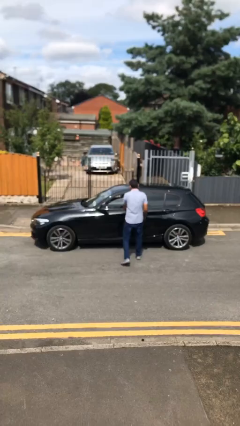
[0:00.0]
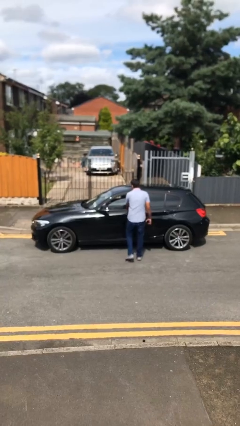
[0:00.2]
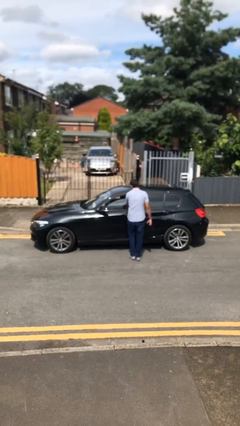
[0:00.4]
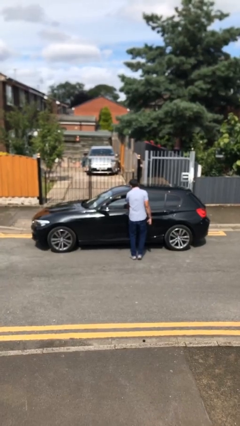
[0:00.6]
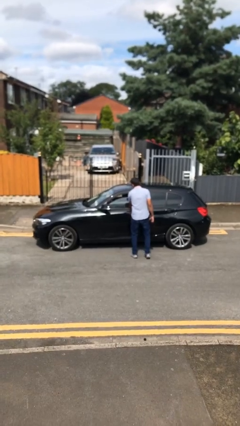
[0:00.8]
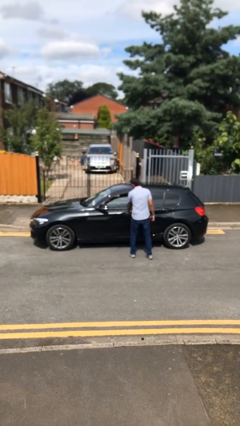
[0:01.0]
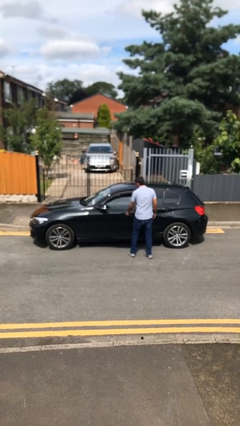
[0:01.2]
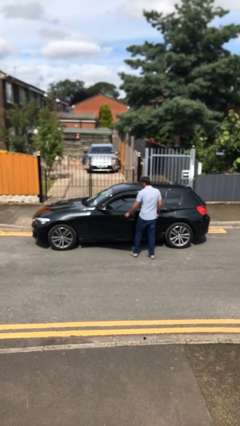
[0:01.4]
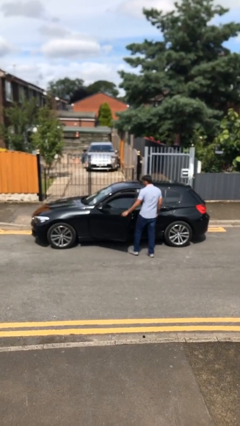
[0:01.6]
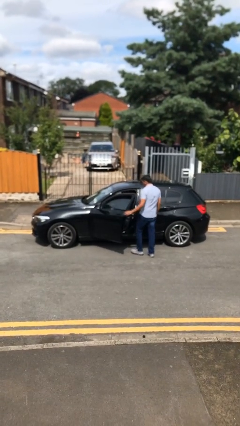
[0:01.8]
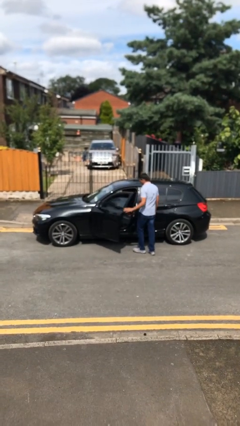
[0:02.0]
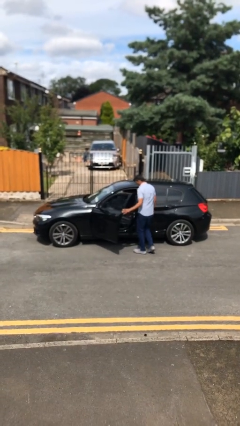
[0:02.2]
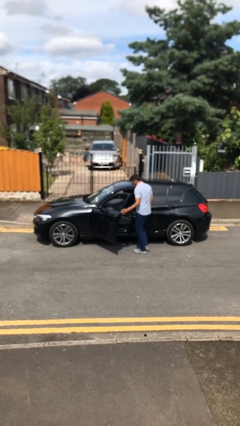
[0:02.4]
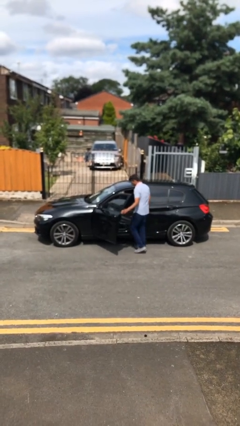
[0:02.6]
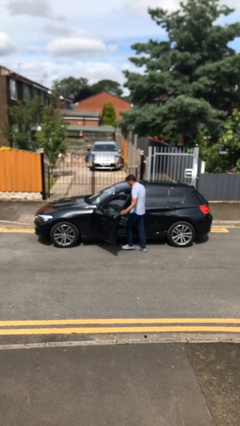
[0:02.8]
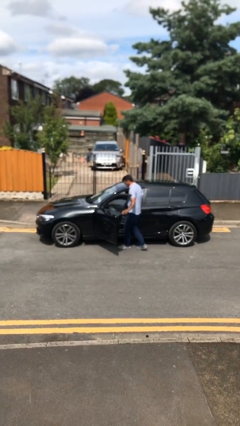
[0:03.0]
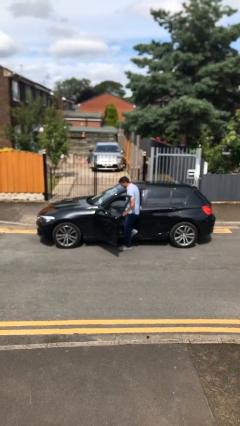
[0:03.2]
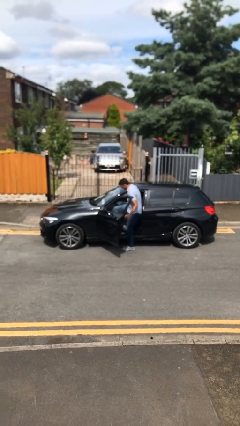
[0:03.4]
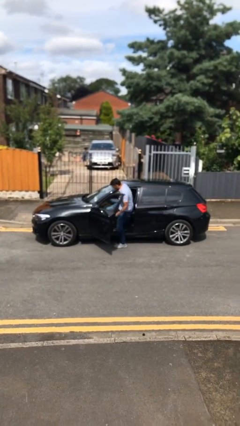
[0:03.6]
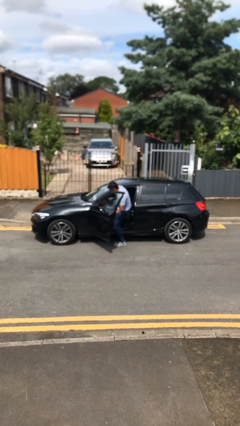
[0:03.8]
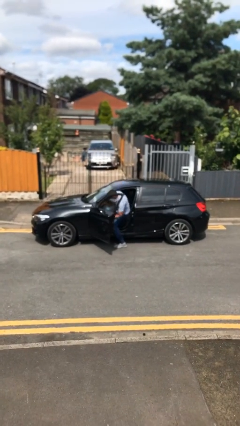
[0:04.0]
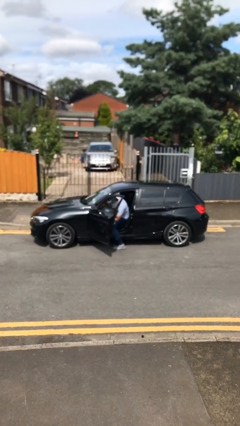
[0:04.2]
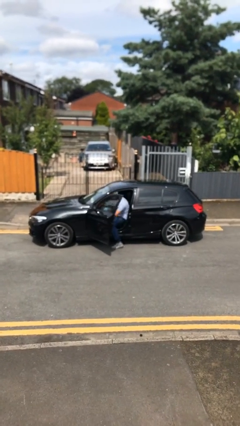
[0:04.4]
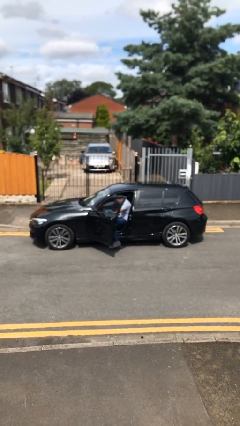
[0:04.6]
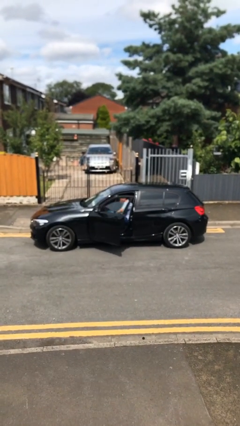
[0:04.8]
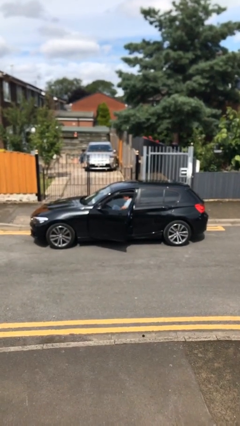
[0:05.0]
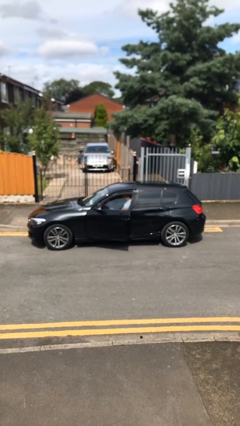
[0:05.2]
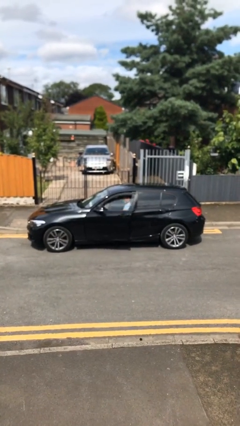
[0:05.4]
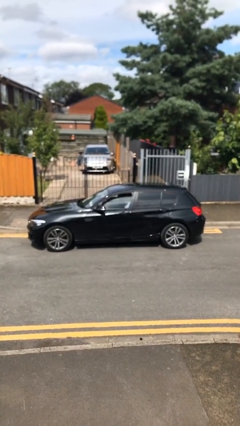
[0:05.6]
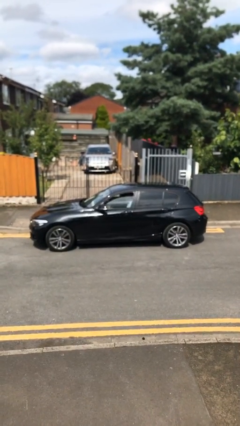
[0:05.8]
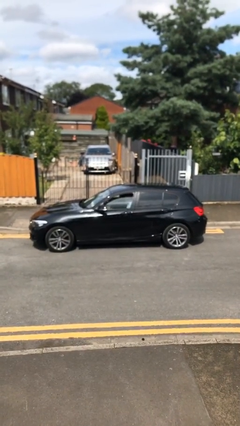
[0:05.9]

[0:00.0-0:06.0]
car picks up person

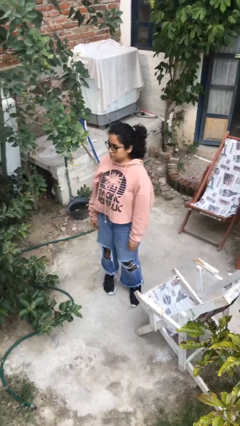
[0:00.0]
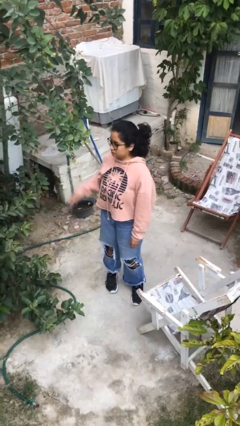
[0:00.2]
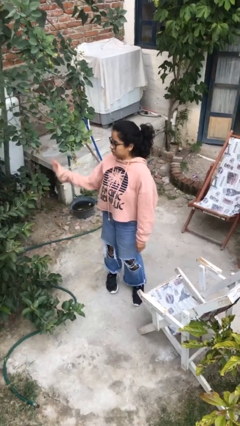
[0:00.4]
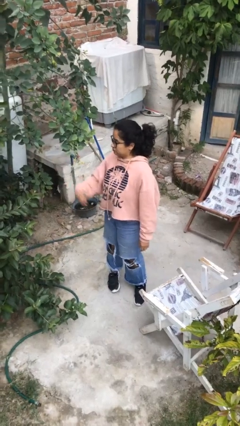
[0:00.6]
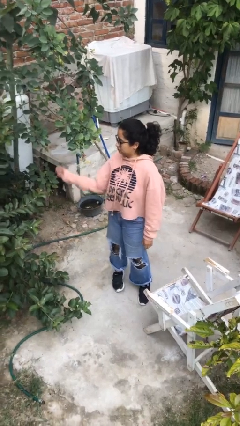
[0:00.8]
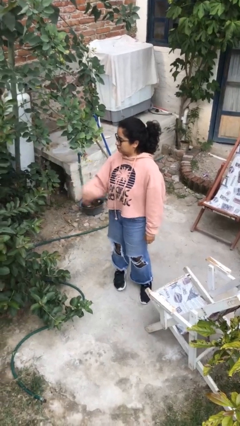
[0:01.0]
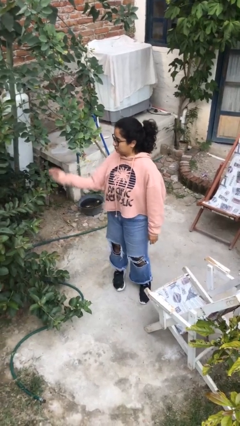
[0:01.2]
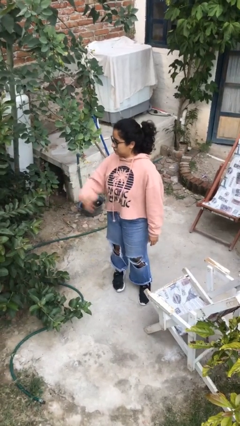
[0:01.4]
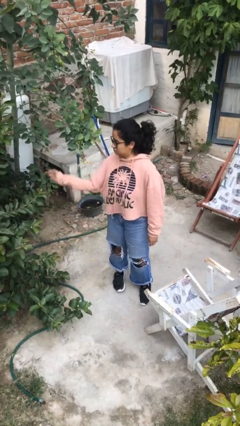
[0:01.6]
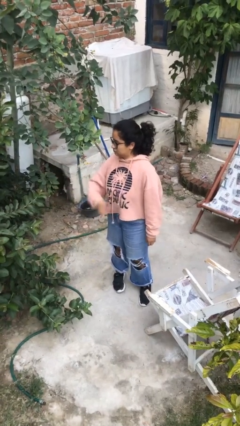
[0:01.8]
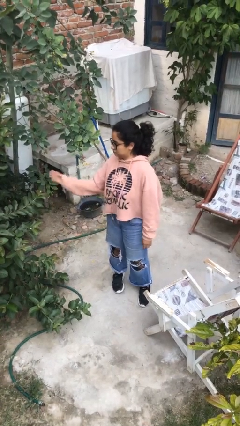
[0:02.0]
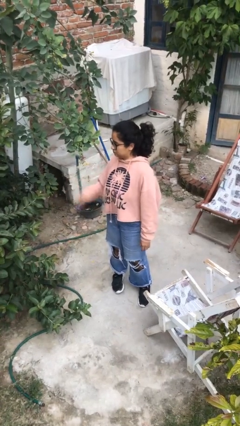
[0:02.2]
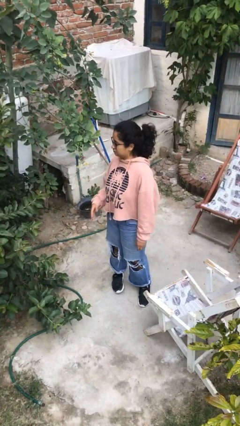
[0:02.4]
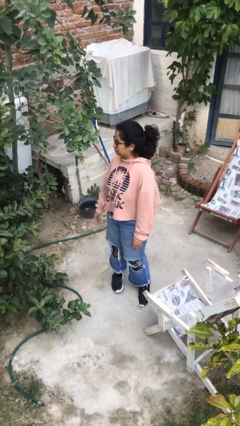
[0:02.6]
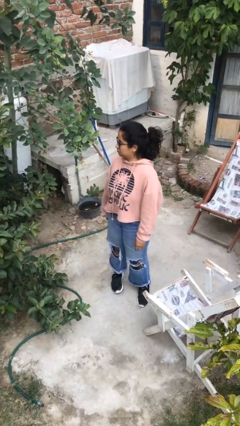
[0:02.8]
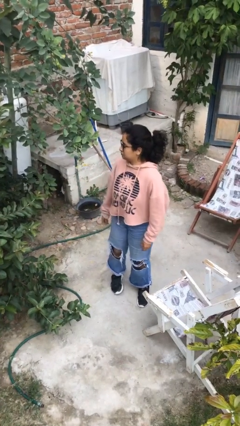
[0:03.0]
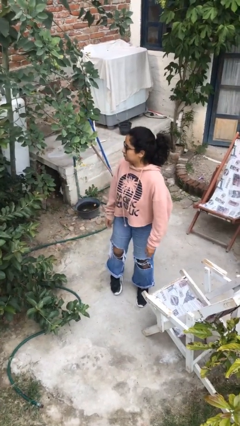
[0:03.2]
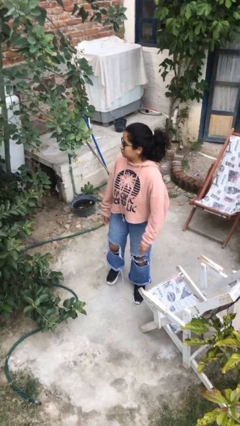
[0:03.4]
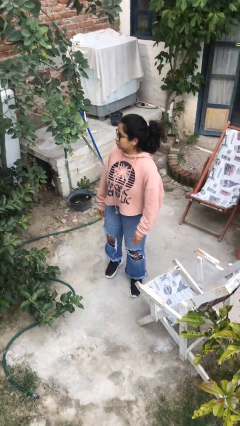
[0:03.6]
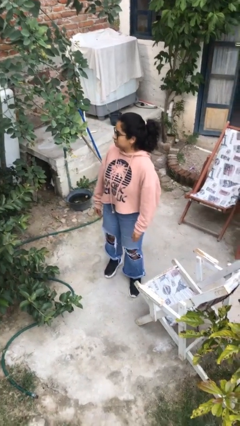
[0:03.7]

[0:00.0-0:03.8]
person punches

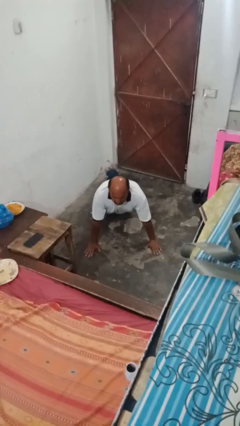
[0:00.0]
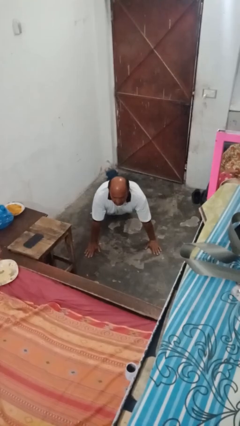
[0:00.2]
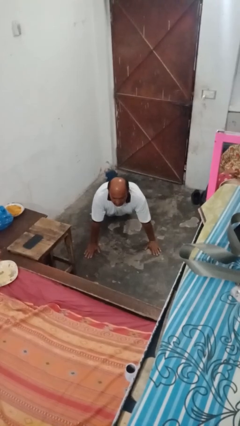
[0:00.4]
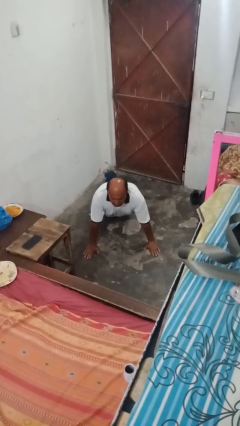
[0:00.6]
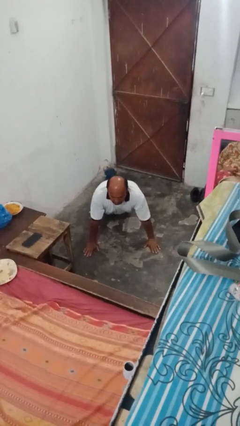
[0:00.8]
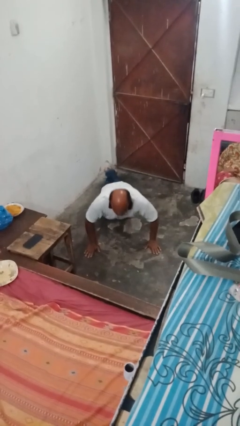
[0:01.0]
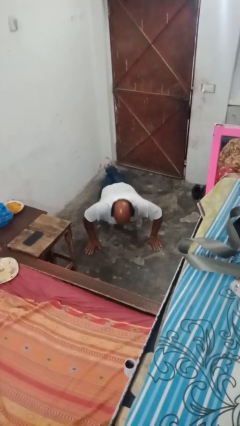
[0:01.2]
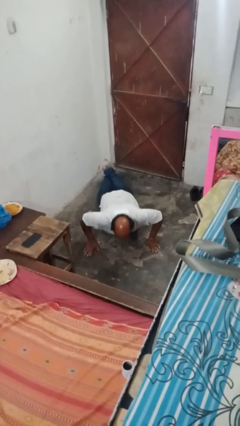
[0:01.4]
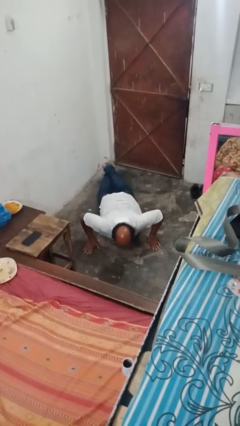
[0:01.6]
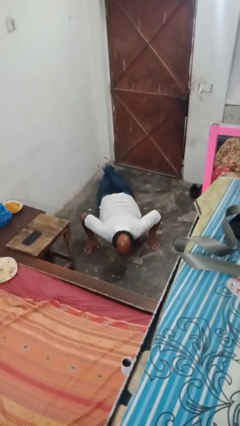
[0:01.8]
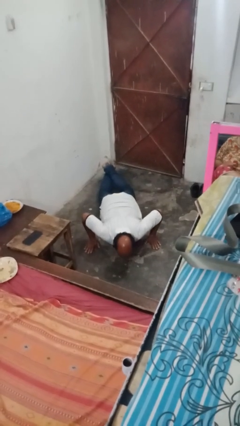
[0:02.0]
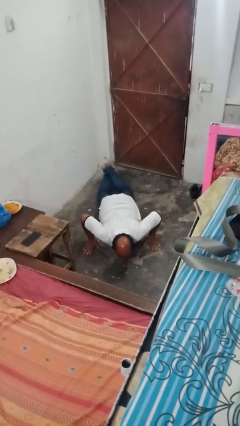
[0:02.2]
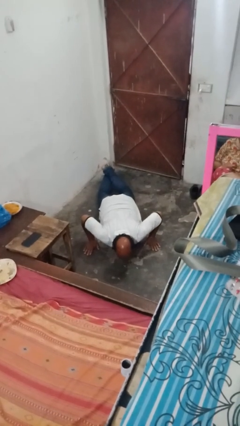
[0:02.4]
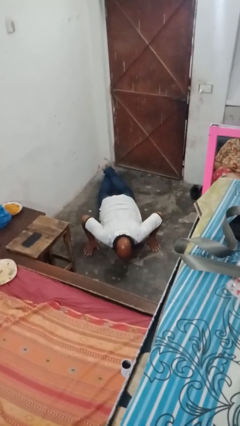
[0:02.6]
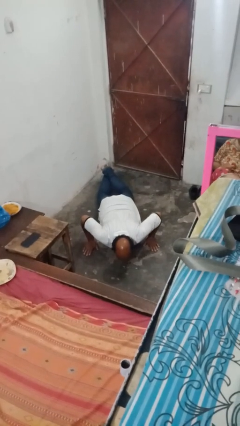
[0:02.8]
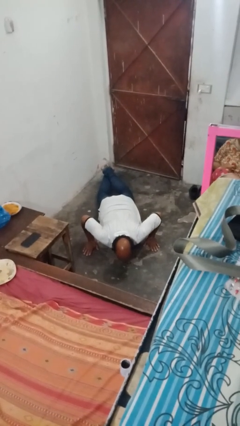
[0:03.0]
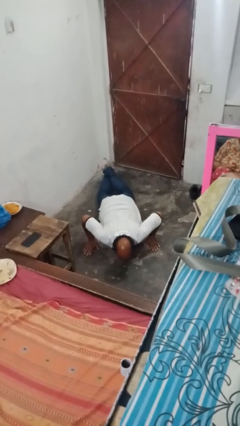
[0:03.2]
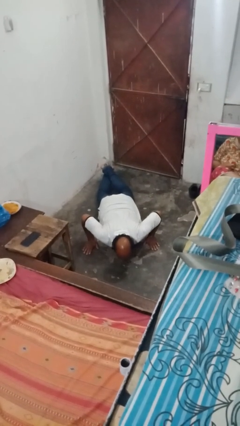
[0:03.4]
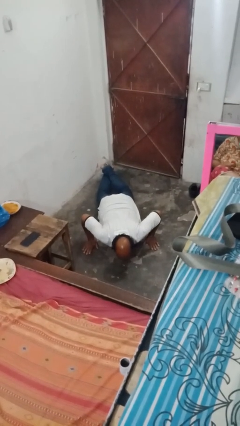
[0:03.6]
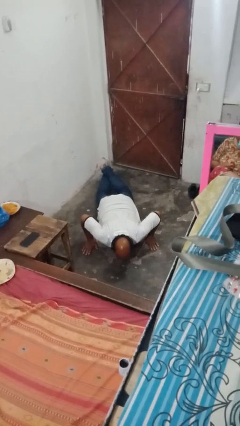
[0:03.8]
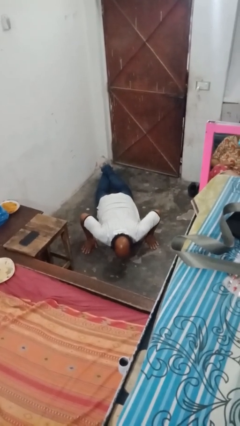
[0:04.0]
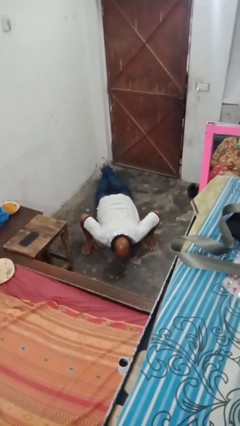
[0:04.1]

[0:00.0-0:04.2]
person exercises with pushup

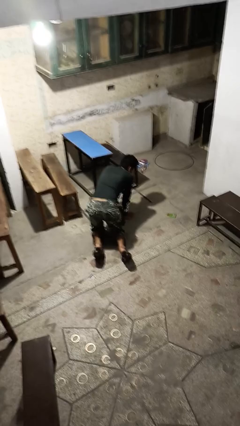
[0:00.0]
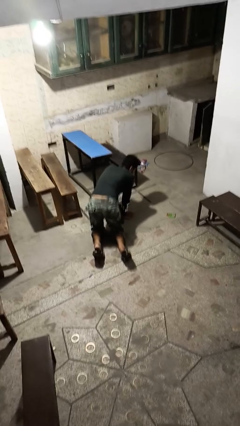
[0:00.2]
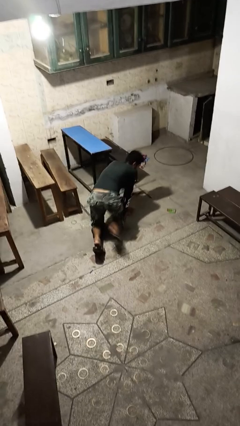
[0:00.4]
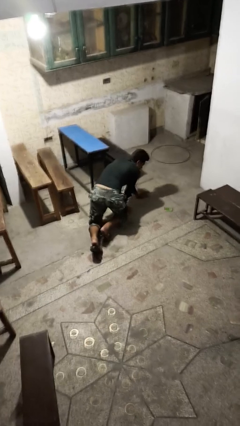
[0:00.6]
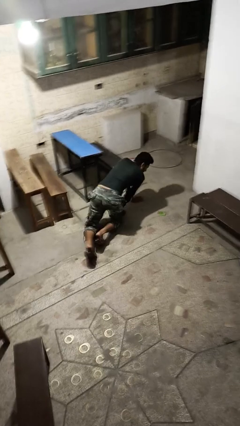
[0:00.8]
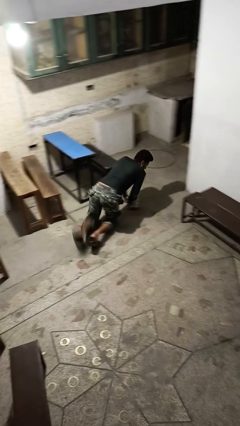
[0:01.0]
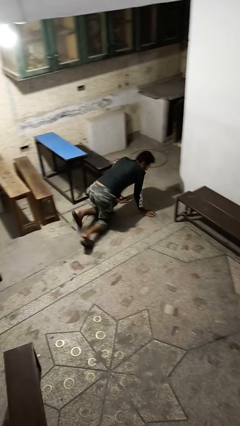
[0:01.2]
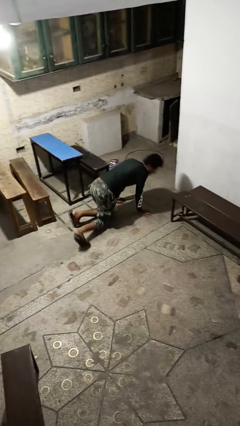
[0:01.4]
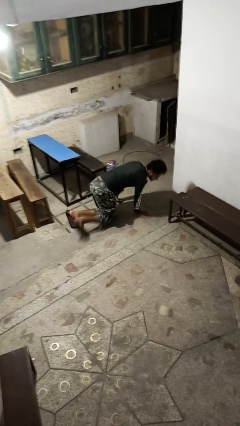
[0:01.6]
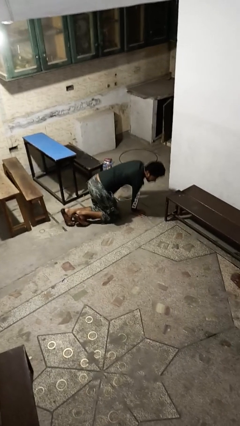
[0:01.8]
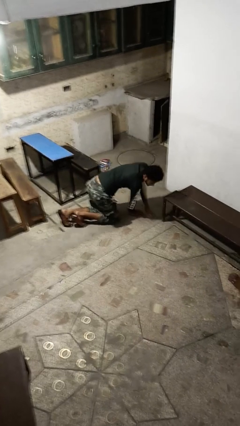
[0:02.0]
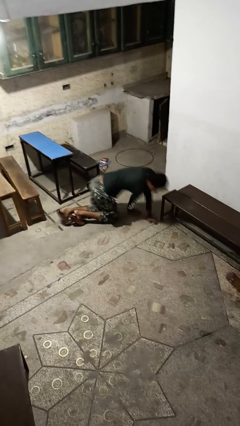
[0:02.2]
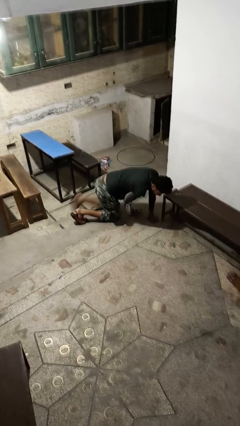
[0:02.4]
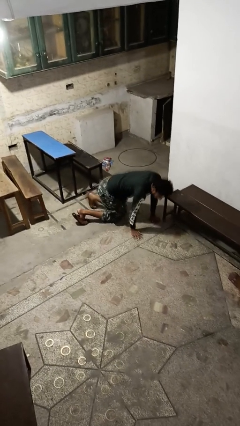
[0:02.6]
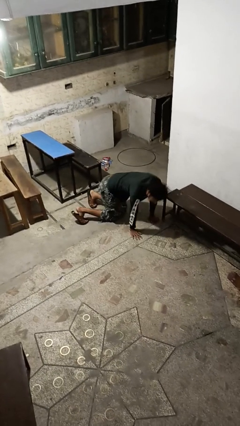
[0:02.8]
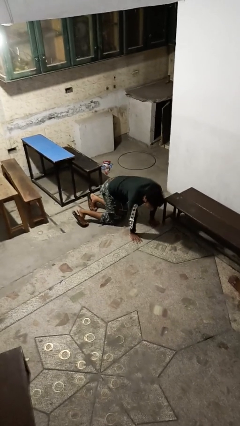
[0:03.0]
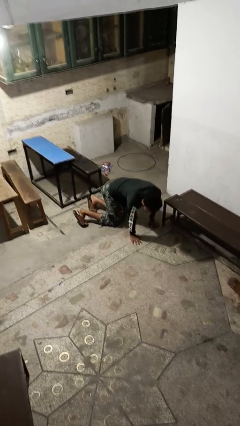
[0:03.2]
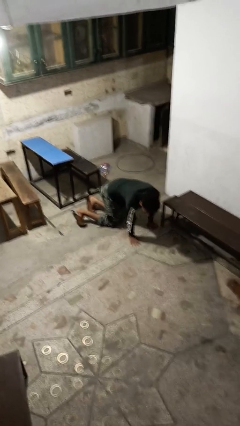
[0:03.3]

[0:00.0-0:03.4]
person crawls

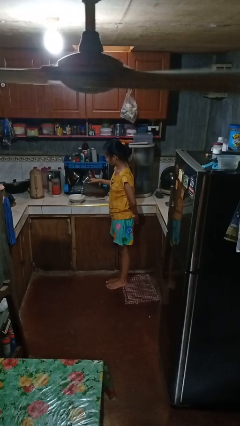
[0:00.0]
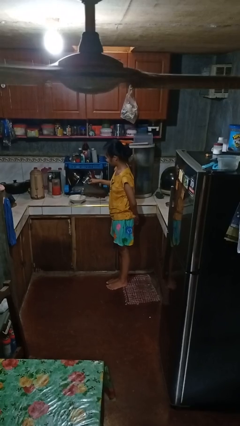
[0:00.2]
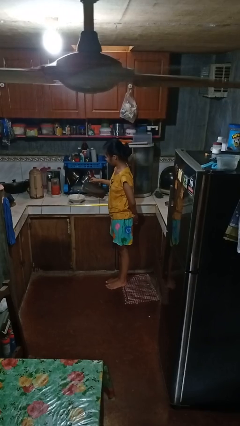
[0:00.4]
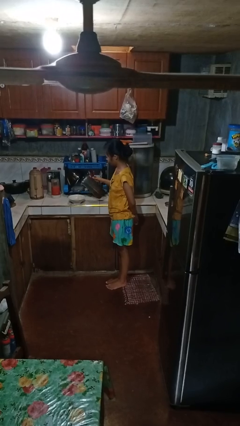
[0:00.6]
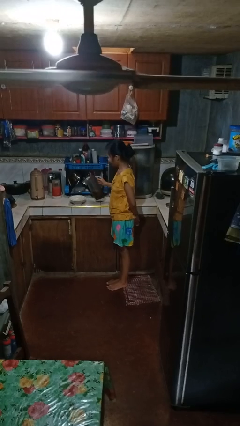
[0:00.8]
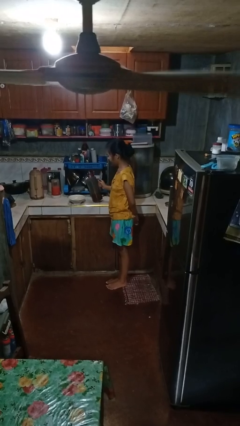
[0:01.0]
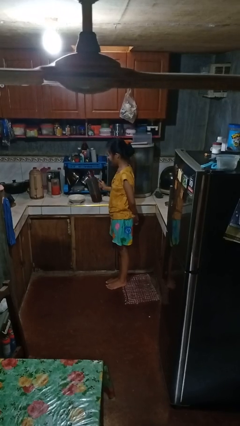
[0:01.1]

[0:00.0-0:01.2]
person pours into bowl
